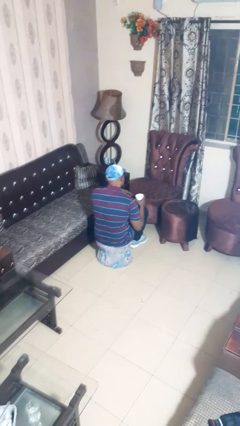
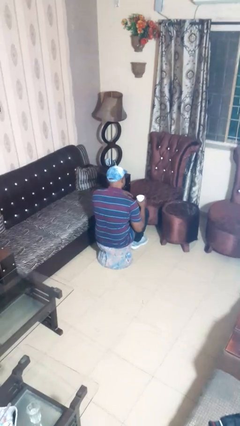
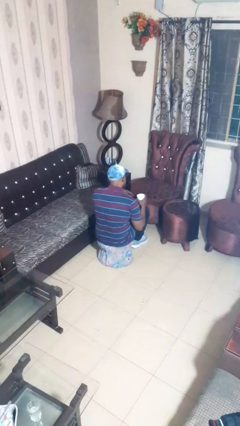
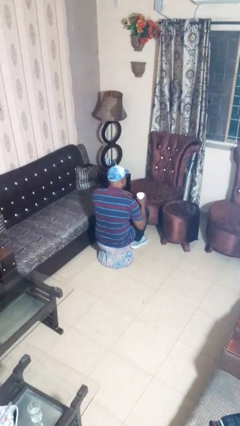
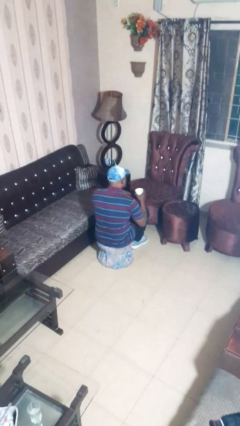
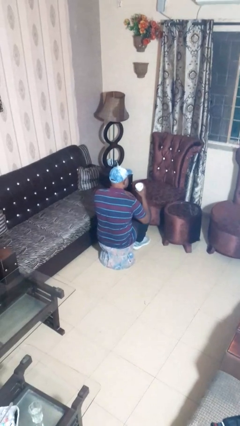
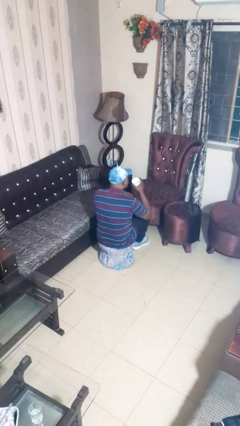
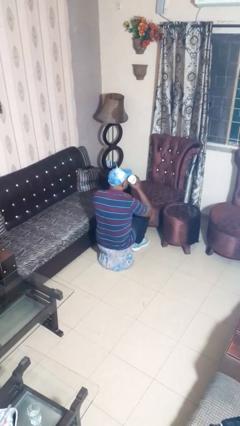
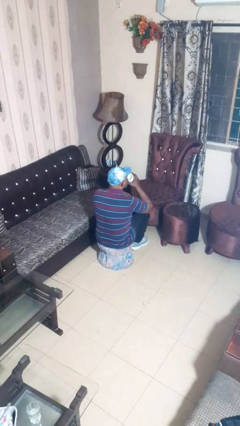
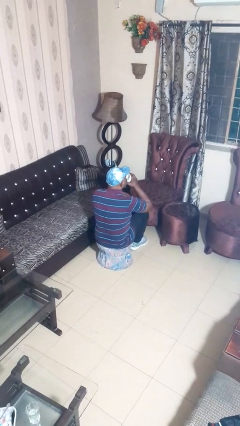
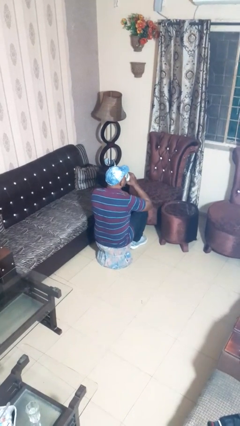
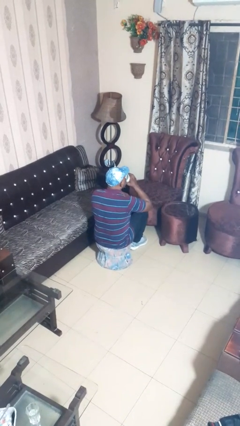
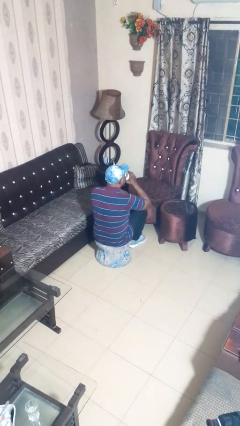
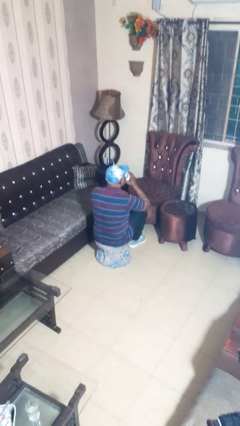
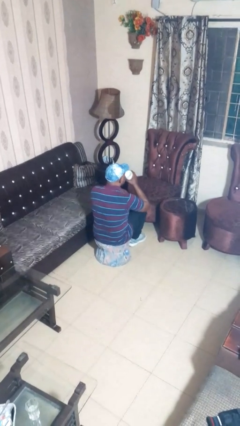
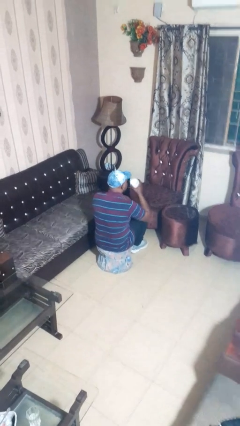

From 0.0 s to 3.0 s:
person drinks from mug

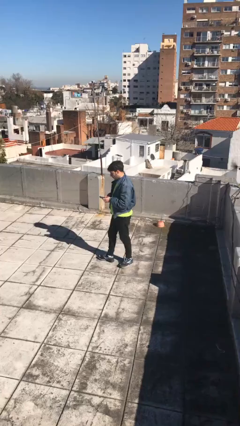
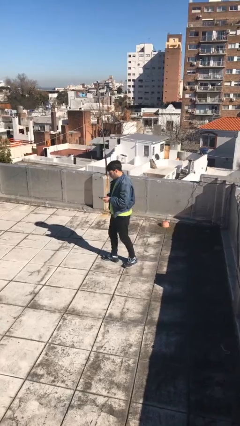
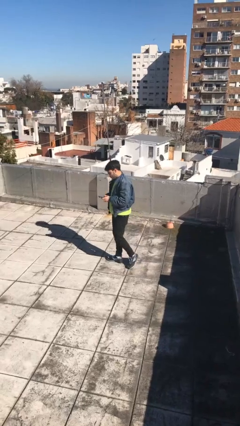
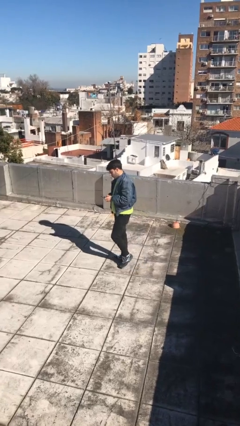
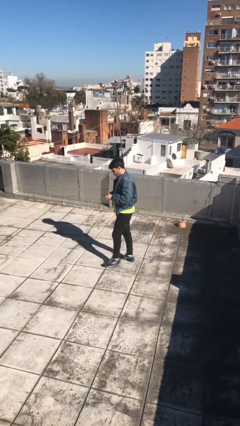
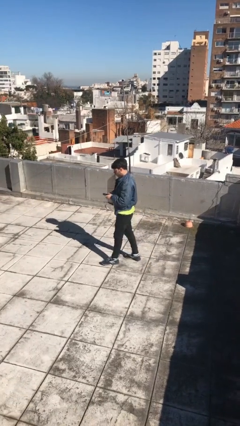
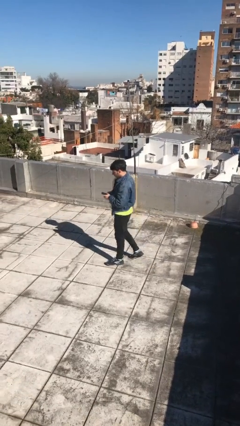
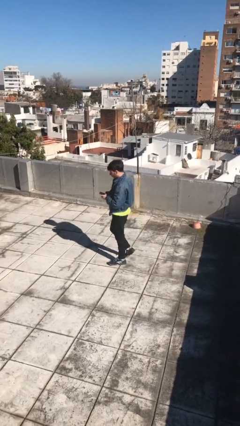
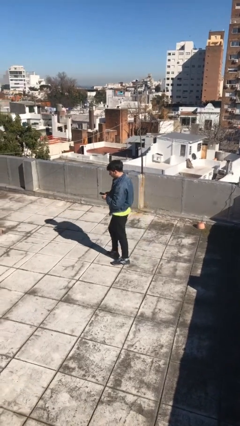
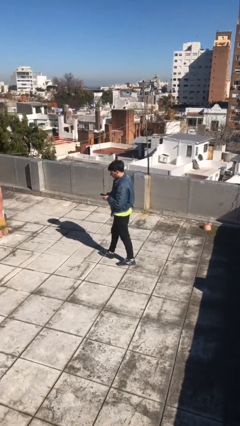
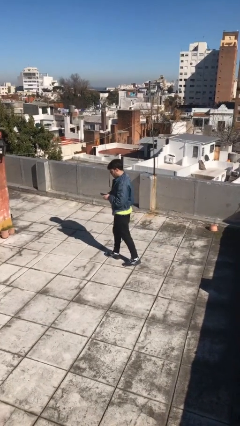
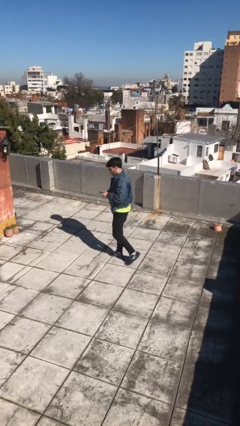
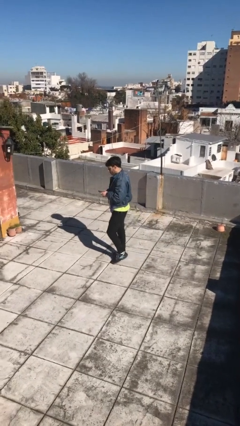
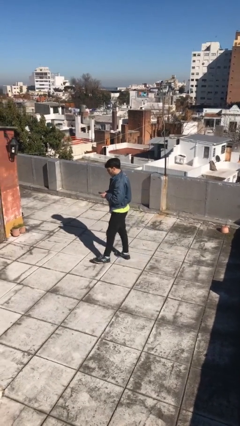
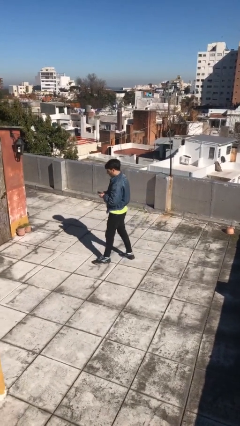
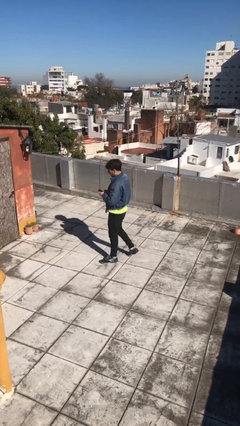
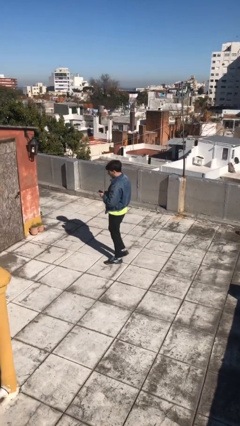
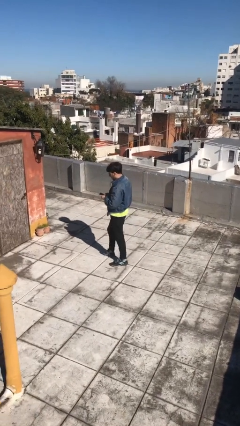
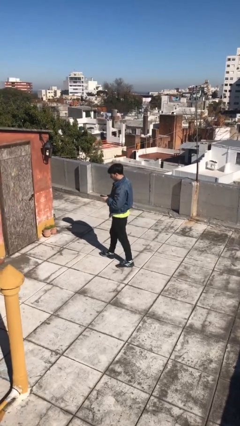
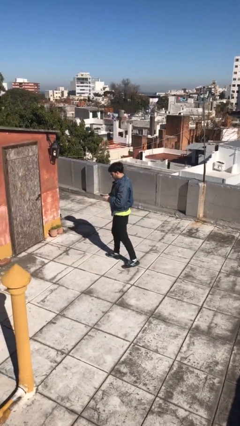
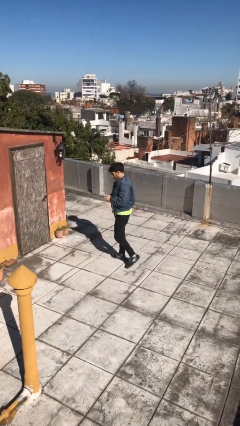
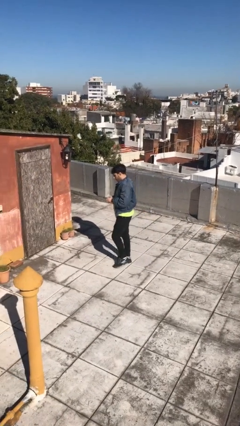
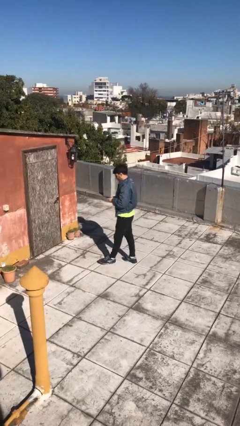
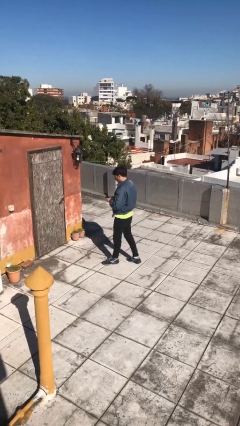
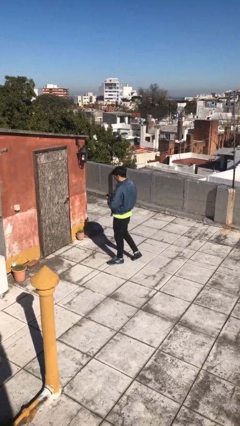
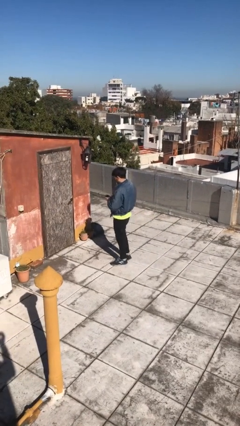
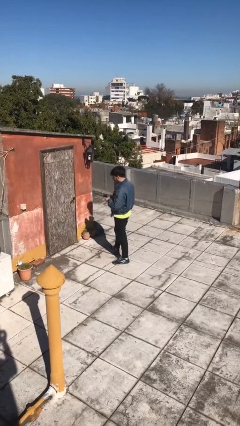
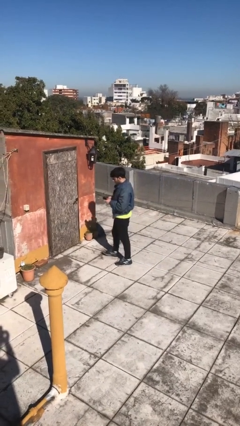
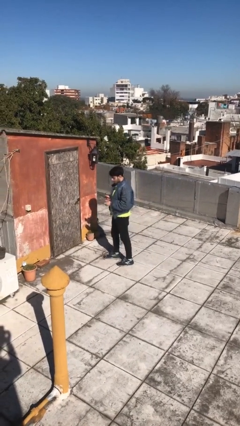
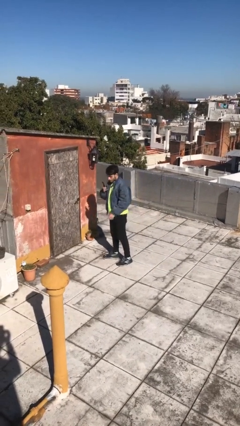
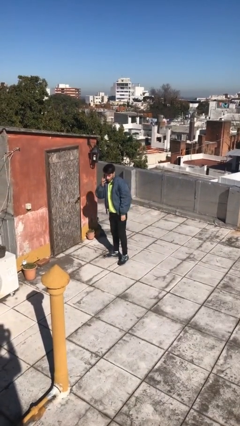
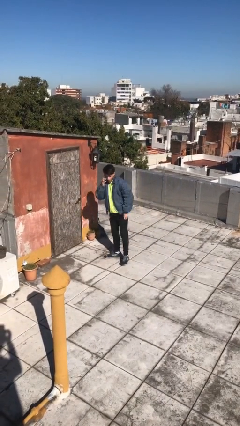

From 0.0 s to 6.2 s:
person texts on phone

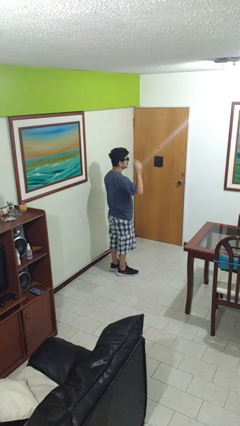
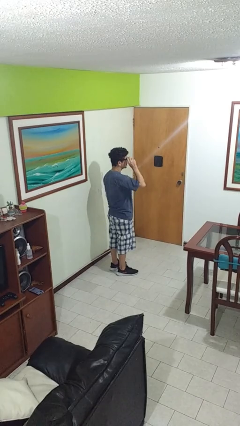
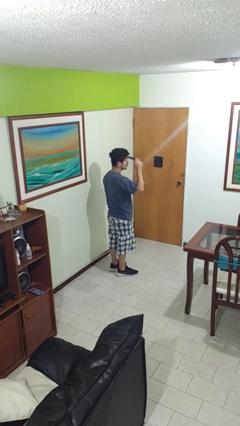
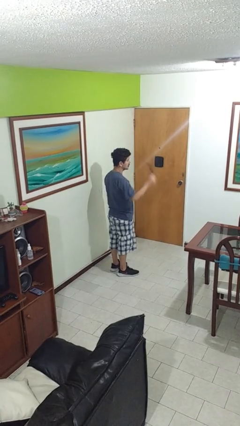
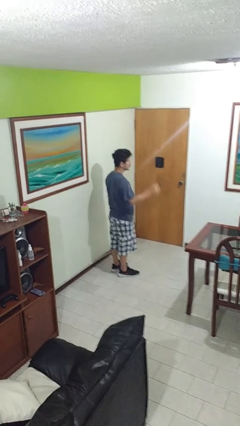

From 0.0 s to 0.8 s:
person takes off sunglasses

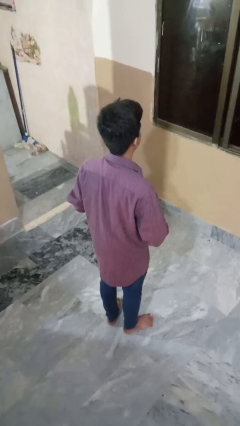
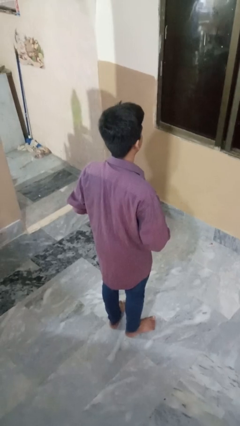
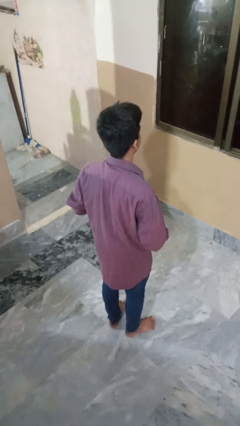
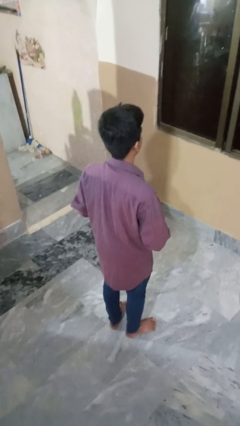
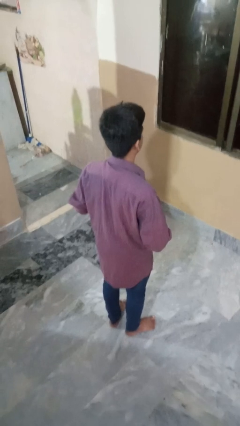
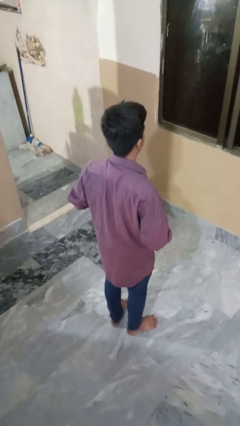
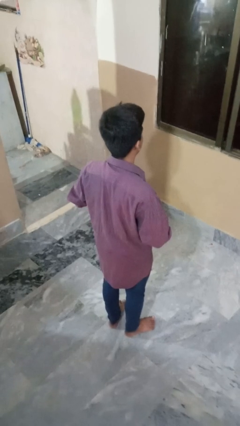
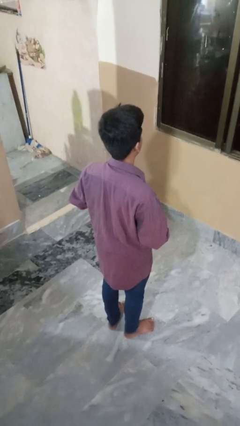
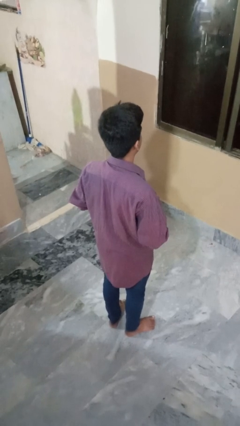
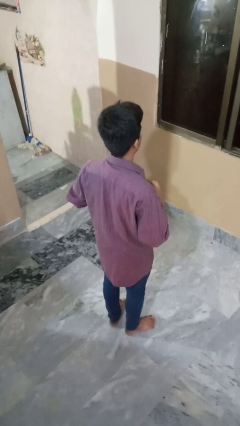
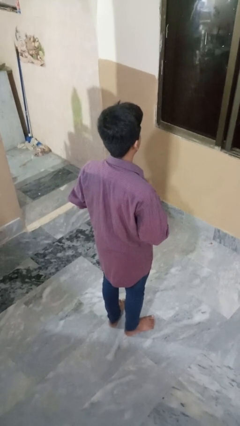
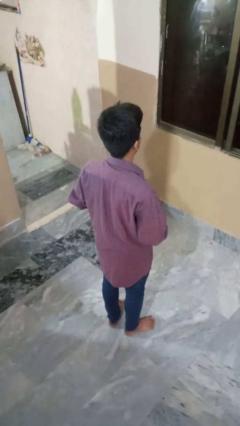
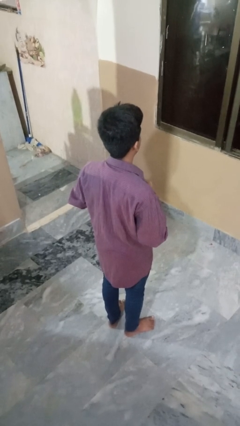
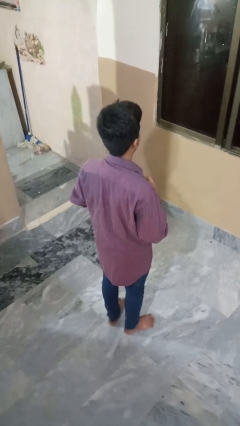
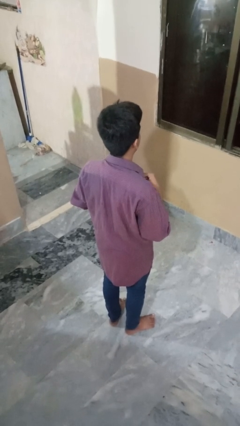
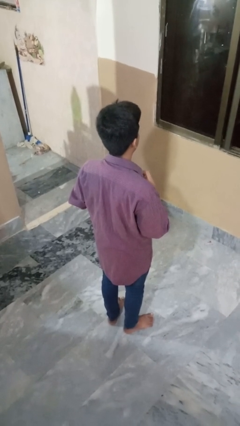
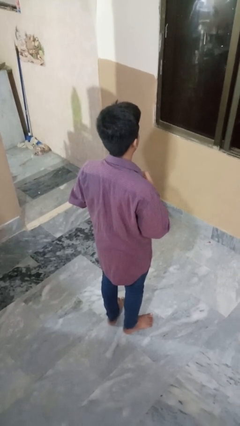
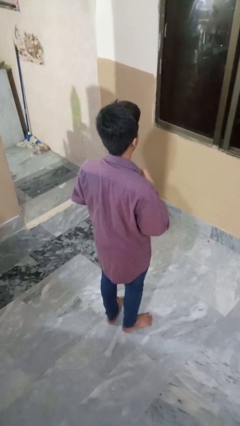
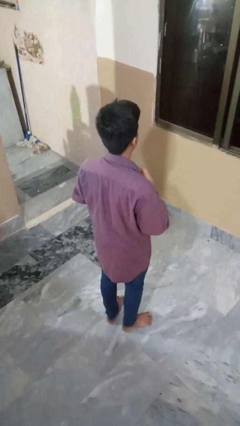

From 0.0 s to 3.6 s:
person buttons shirt

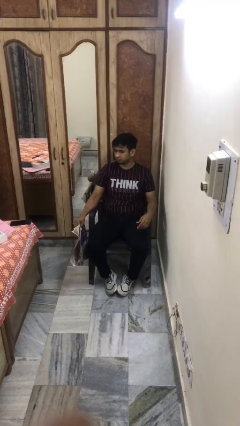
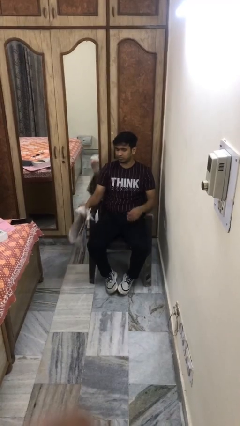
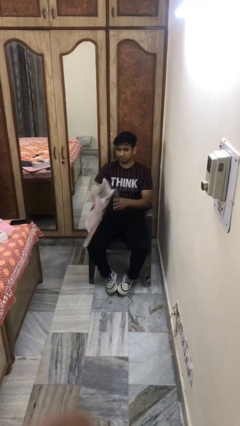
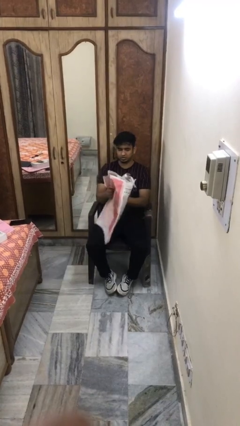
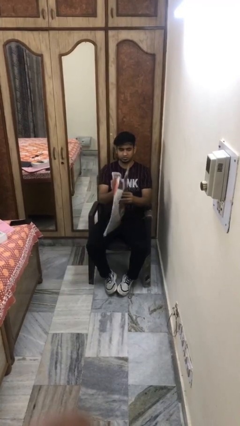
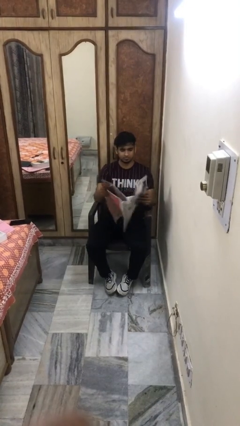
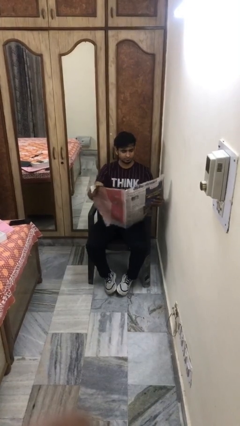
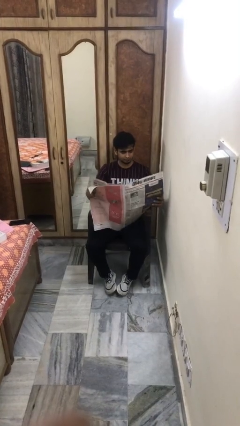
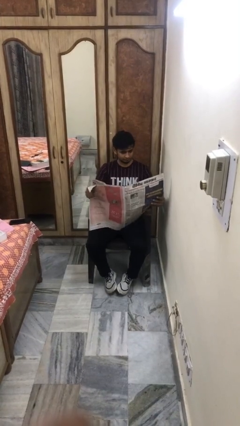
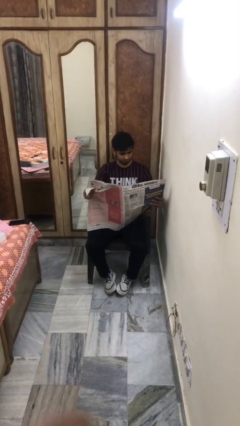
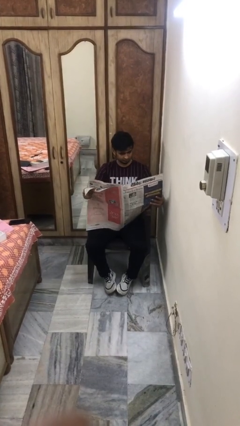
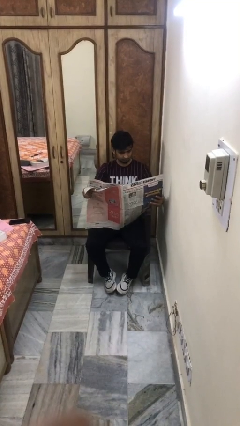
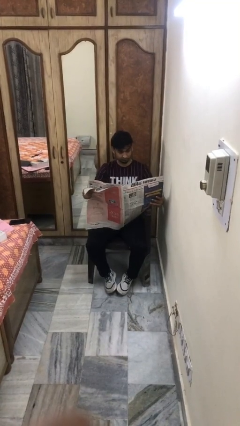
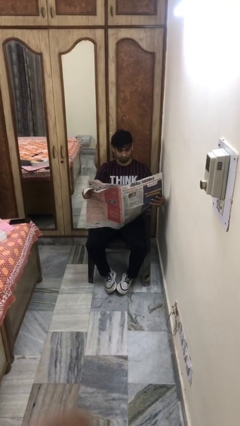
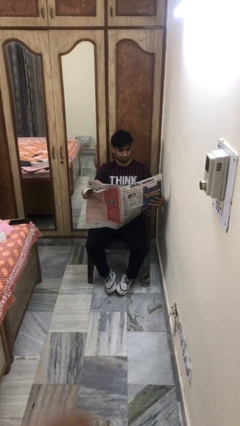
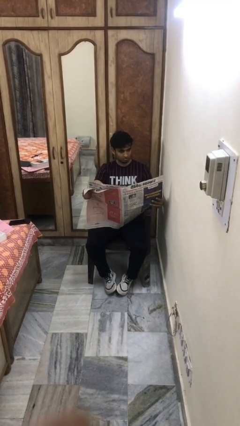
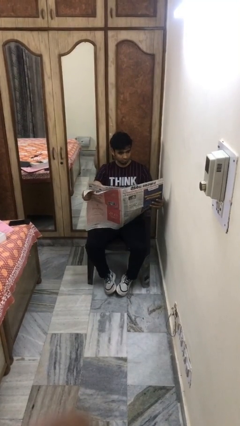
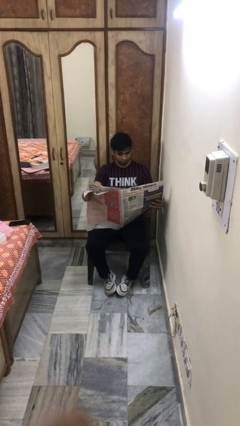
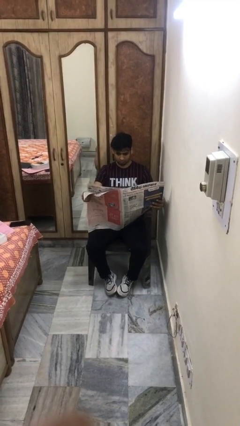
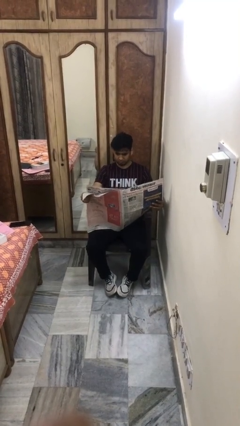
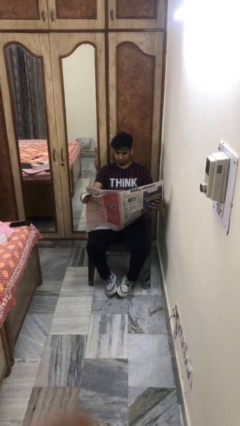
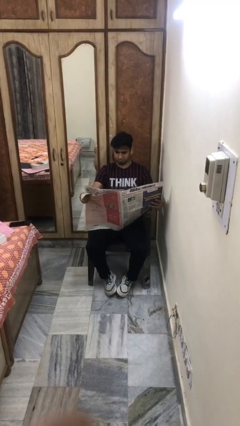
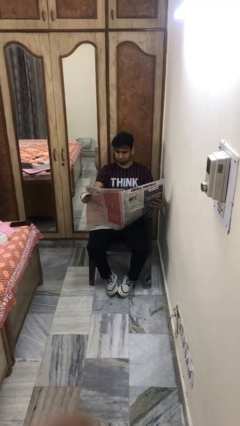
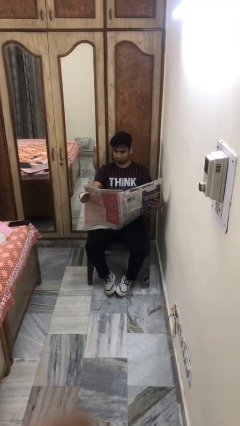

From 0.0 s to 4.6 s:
person reads newspaper
